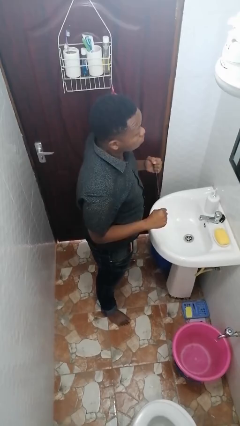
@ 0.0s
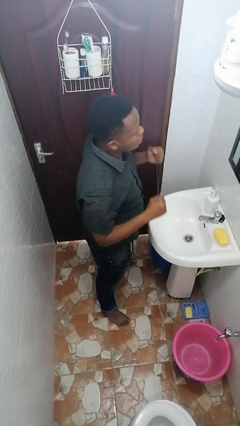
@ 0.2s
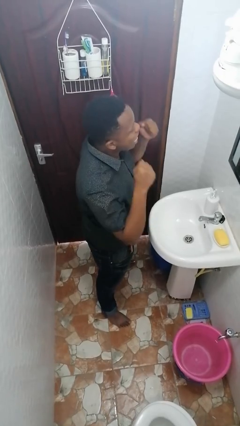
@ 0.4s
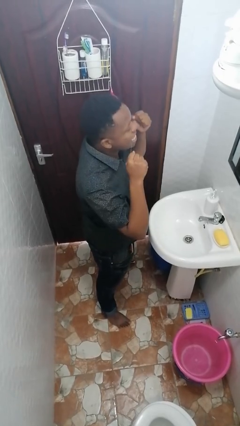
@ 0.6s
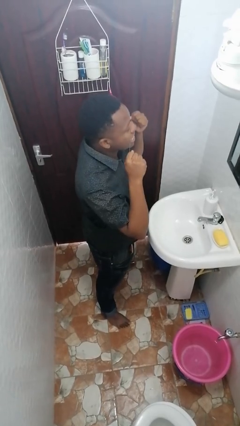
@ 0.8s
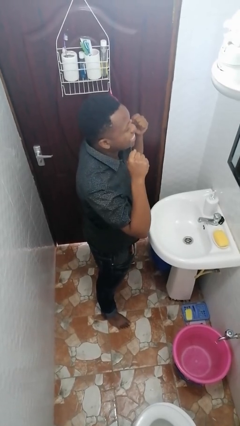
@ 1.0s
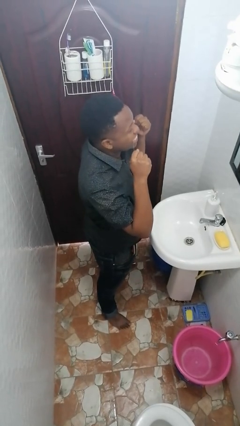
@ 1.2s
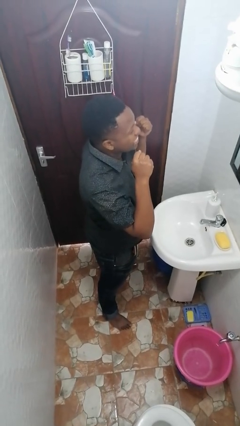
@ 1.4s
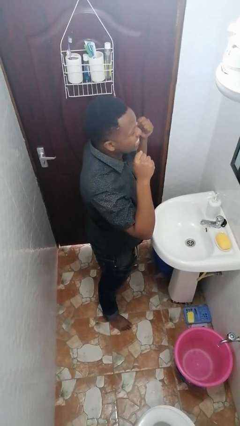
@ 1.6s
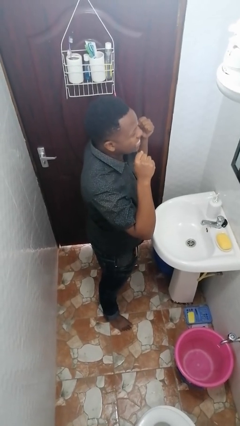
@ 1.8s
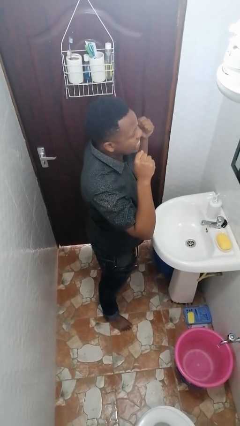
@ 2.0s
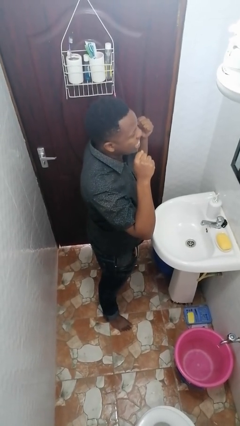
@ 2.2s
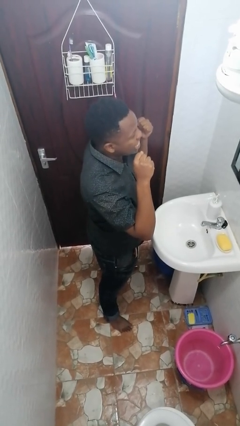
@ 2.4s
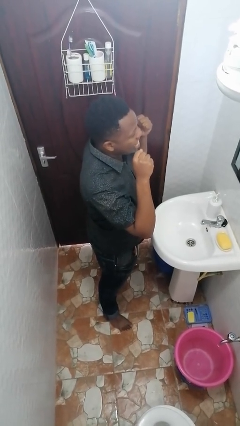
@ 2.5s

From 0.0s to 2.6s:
person flosses

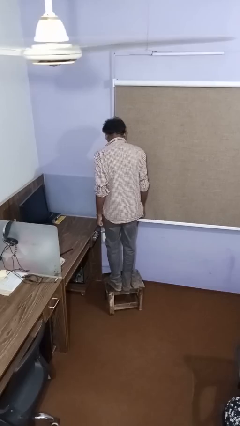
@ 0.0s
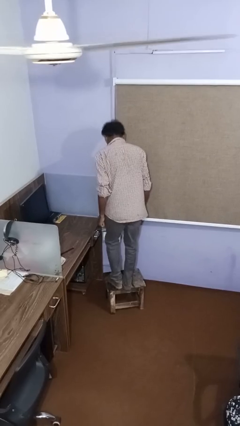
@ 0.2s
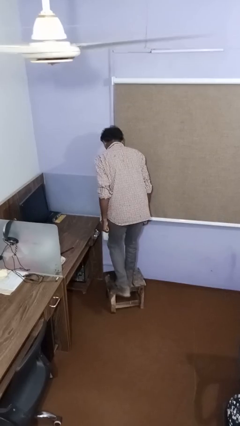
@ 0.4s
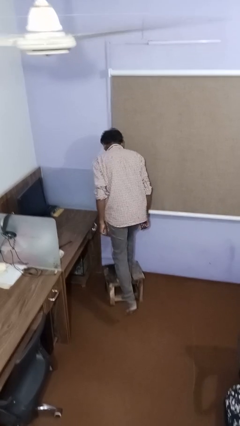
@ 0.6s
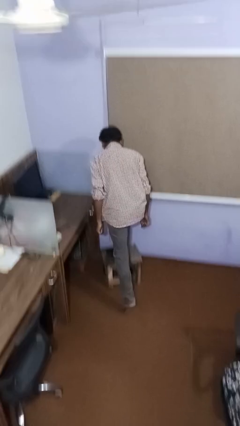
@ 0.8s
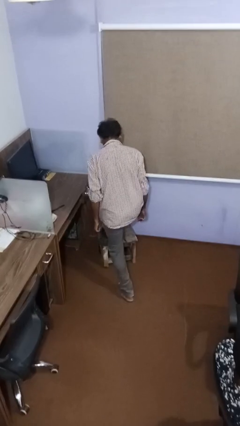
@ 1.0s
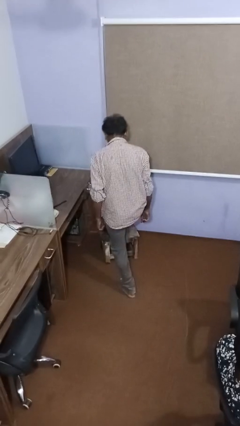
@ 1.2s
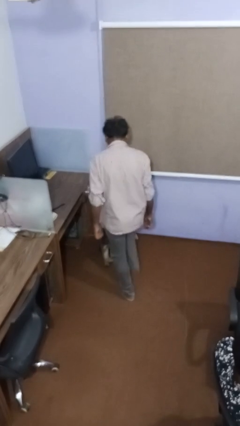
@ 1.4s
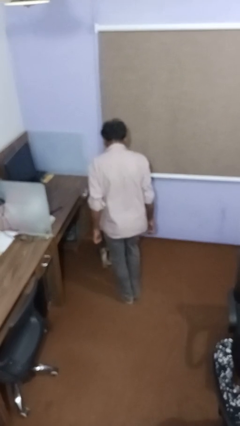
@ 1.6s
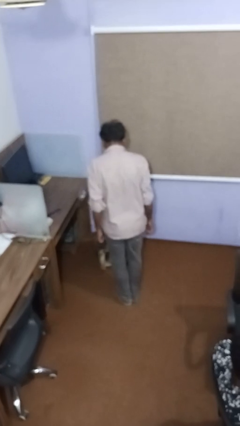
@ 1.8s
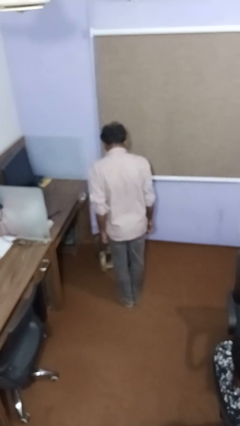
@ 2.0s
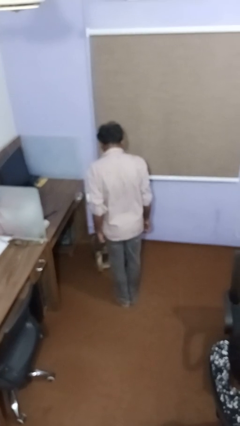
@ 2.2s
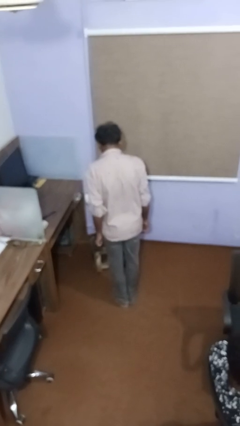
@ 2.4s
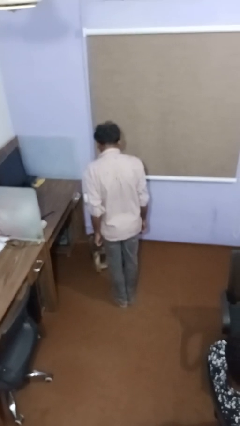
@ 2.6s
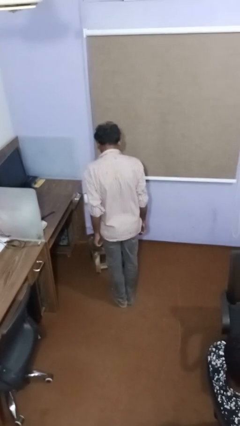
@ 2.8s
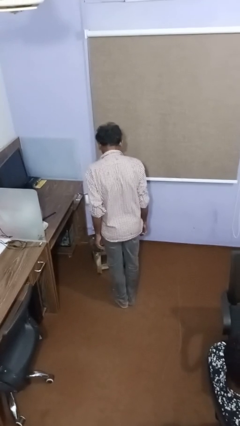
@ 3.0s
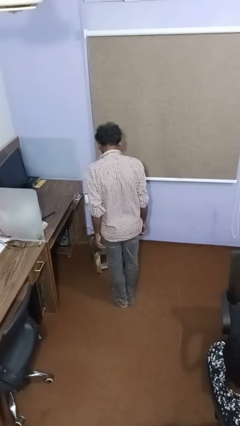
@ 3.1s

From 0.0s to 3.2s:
person climbs off table

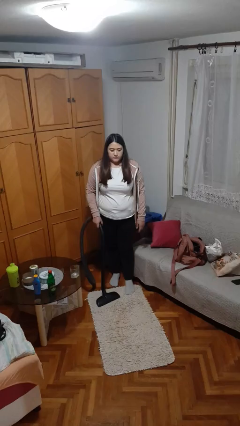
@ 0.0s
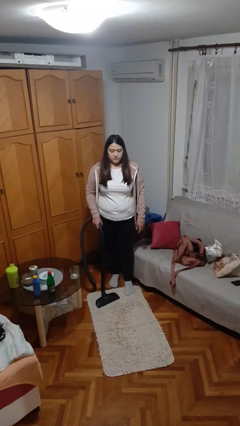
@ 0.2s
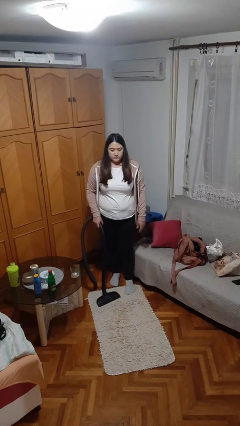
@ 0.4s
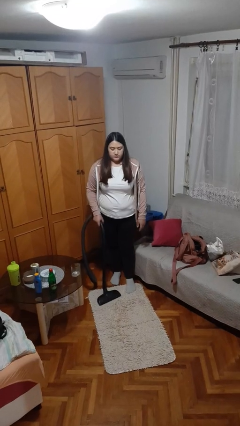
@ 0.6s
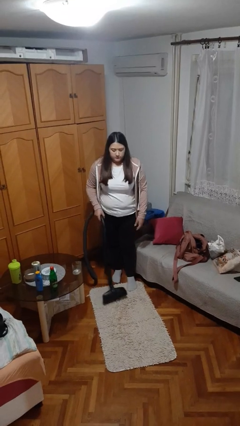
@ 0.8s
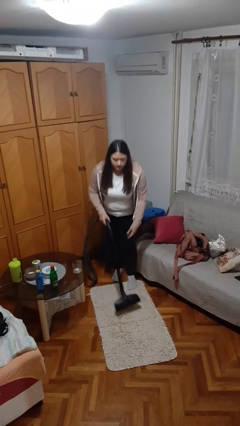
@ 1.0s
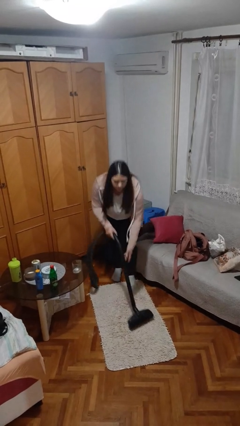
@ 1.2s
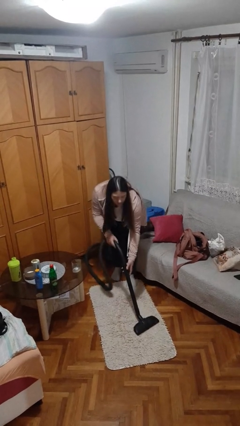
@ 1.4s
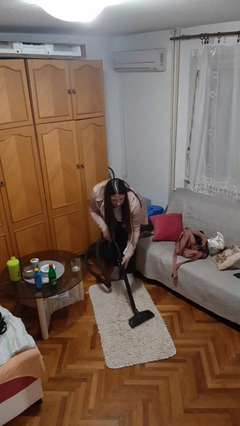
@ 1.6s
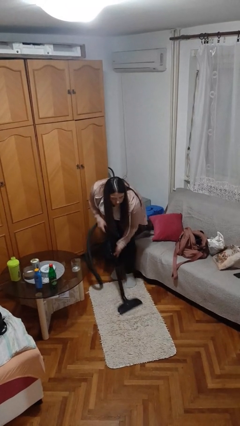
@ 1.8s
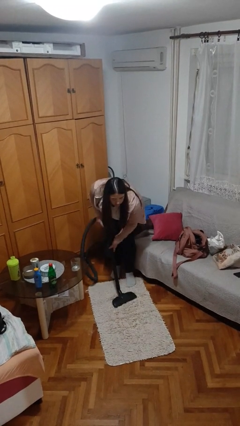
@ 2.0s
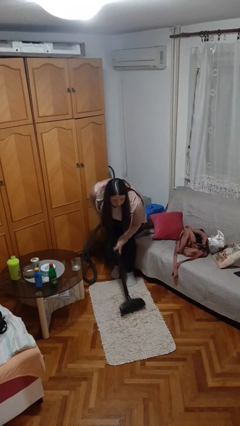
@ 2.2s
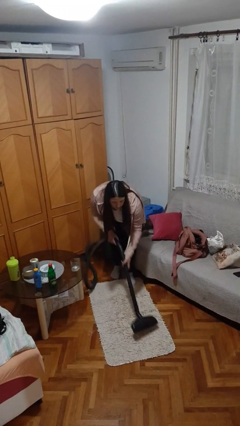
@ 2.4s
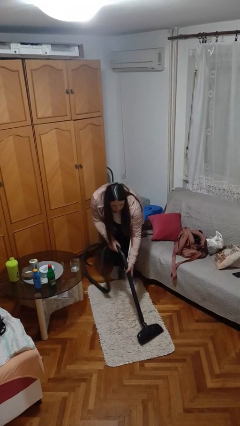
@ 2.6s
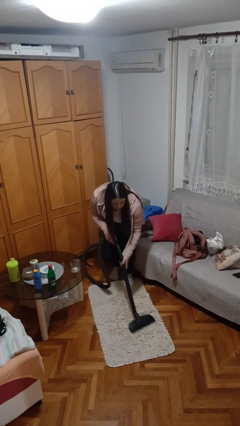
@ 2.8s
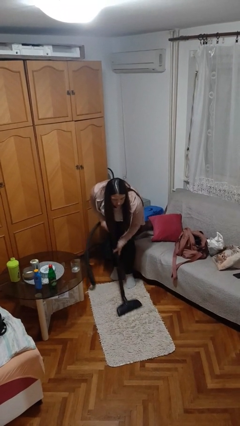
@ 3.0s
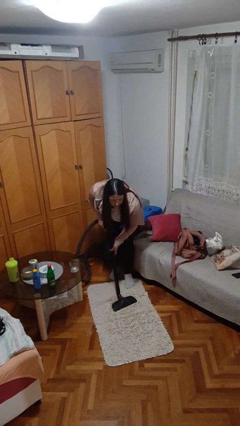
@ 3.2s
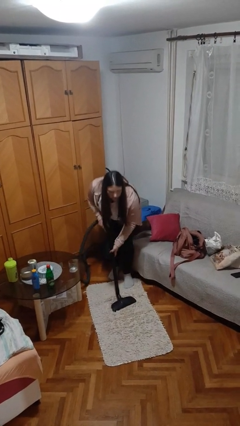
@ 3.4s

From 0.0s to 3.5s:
person vacuums carpet

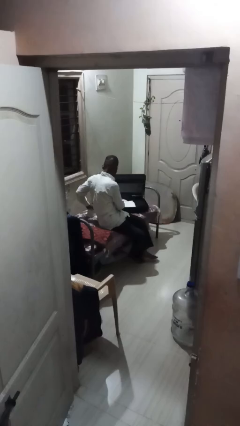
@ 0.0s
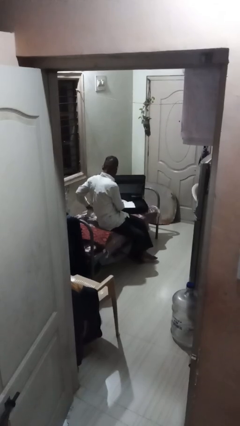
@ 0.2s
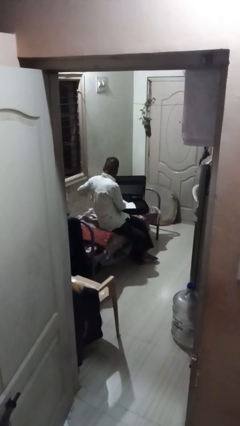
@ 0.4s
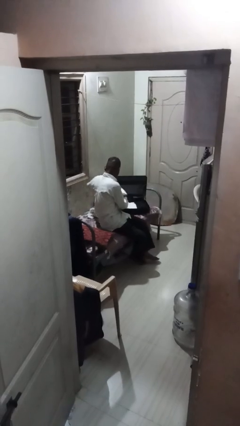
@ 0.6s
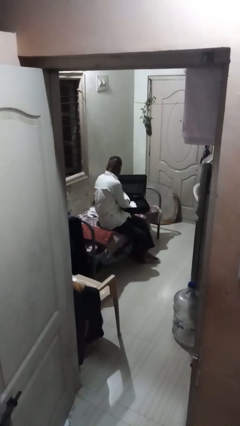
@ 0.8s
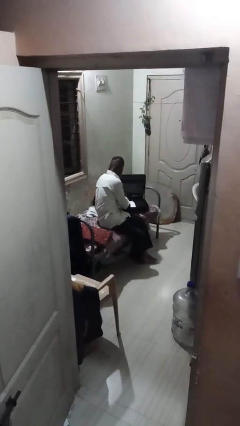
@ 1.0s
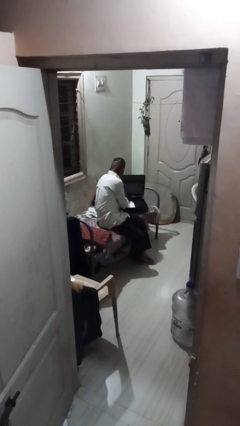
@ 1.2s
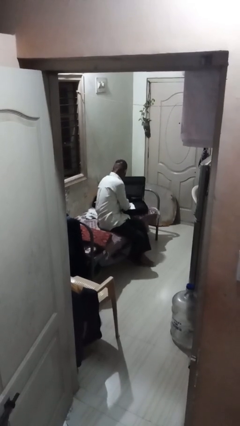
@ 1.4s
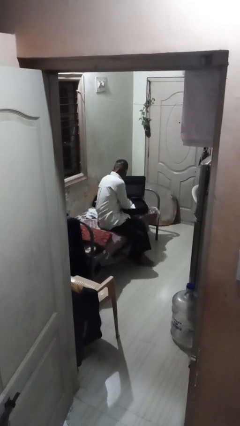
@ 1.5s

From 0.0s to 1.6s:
person loads clothes into suitcase

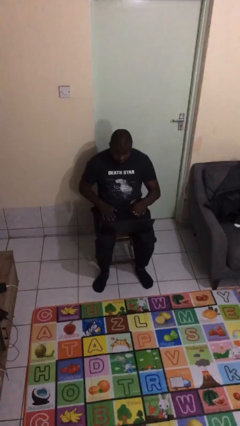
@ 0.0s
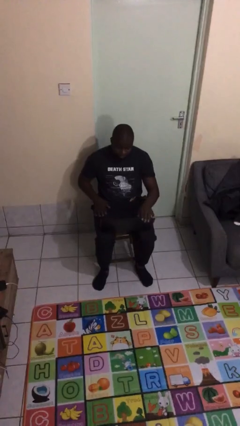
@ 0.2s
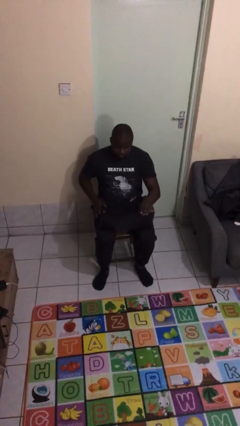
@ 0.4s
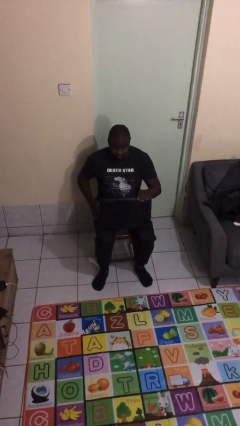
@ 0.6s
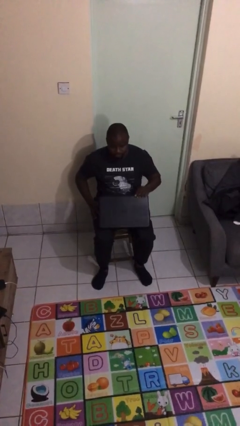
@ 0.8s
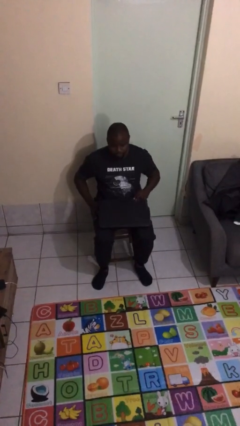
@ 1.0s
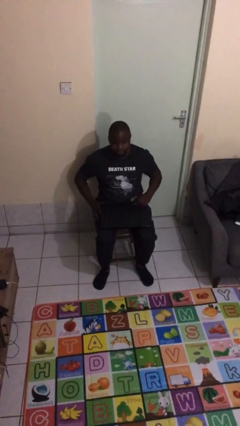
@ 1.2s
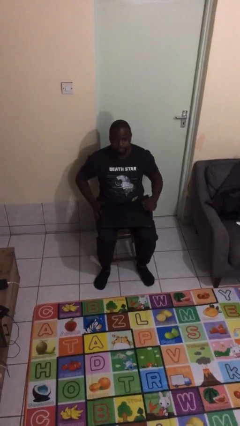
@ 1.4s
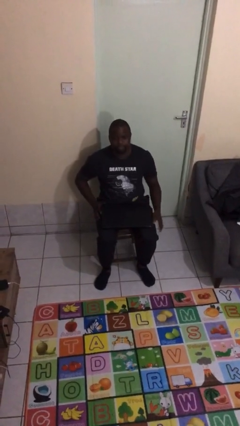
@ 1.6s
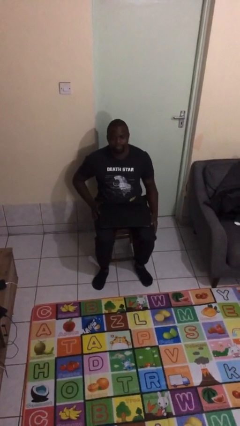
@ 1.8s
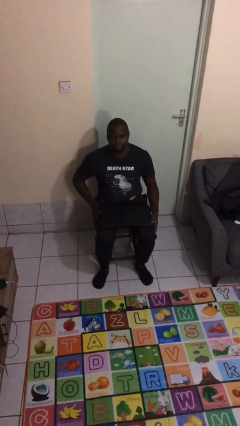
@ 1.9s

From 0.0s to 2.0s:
person closes laptop

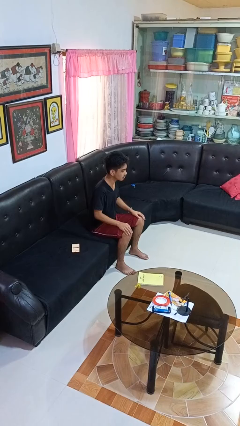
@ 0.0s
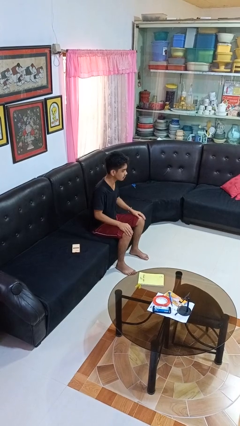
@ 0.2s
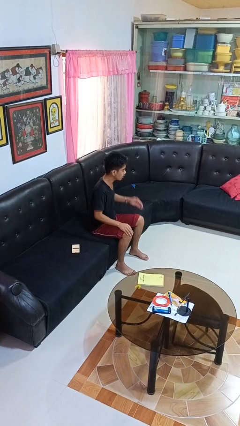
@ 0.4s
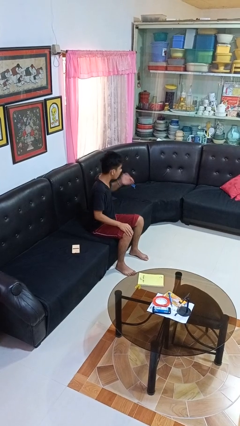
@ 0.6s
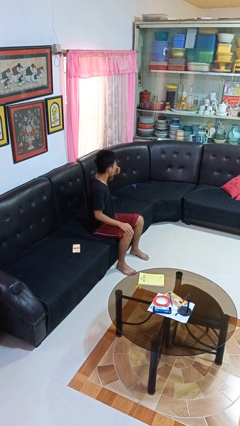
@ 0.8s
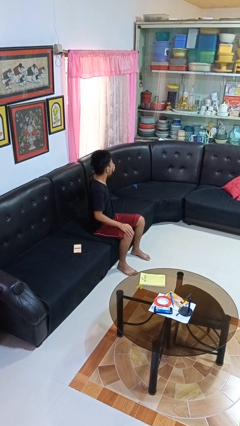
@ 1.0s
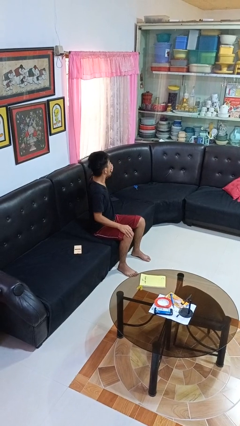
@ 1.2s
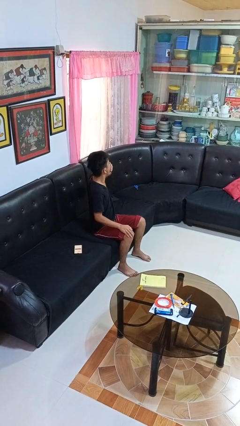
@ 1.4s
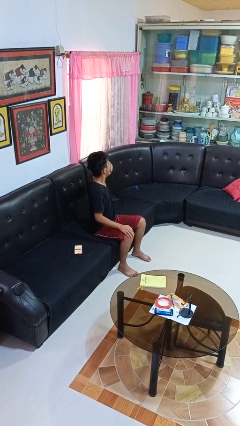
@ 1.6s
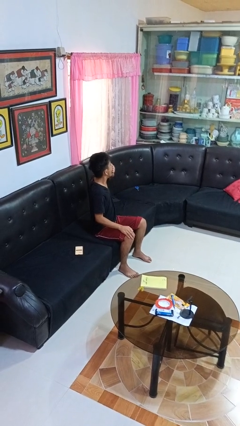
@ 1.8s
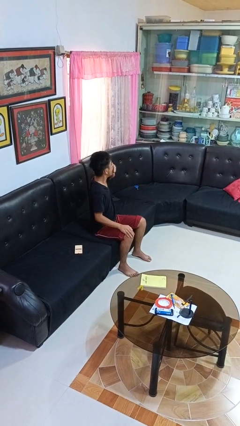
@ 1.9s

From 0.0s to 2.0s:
person yawns

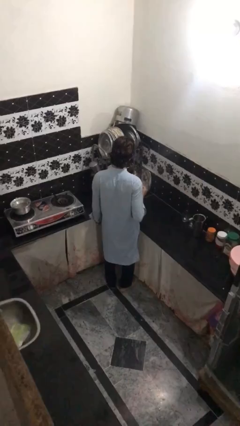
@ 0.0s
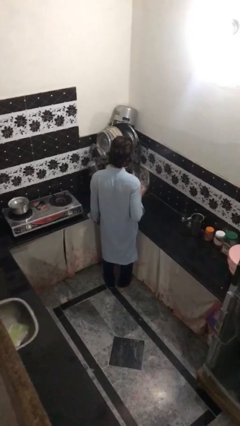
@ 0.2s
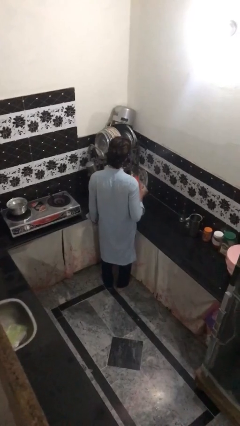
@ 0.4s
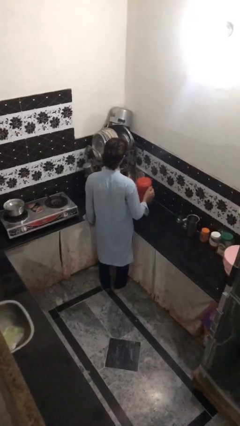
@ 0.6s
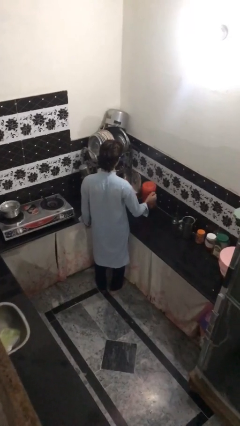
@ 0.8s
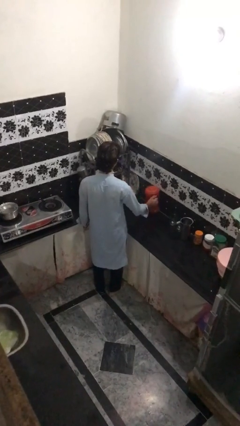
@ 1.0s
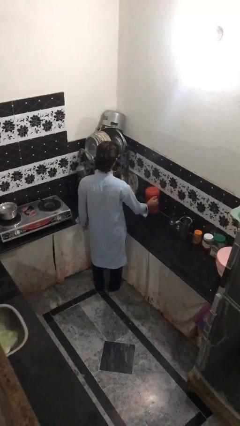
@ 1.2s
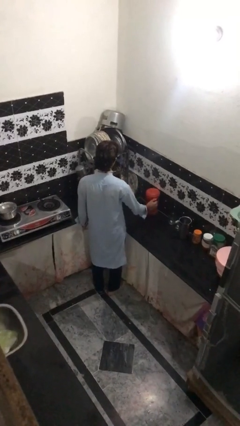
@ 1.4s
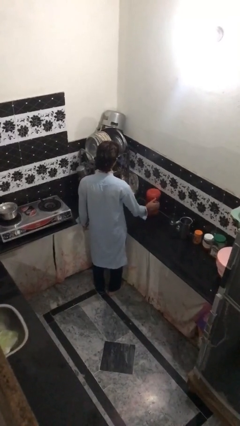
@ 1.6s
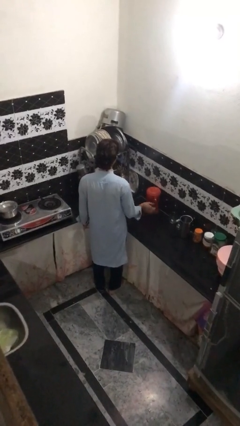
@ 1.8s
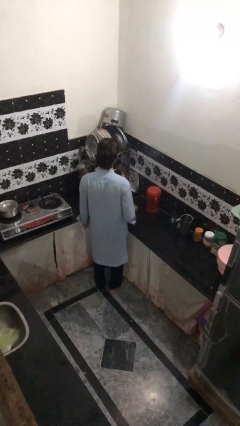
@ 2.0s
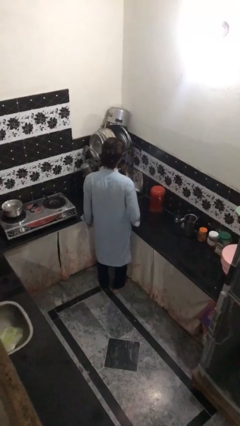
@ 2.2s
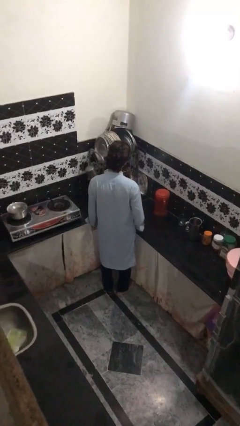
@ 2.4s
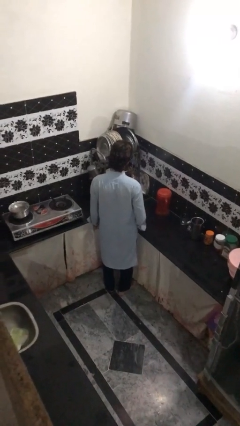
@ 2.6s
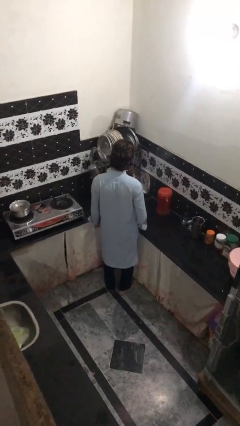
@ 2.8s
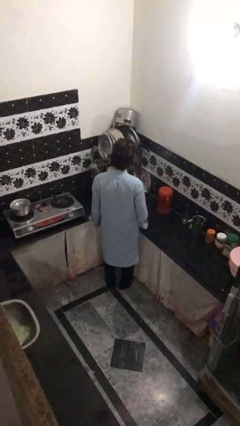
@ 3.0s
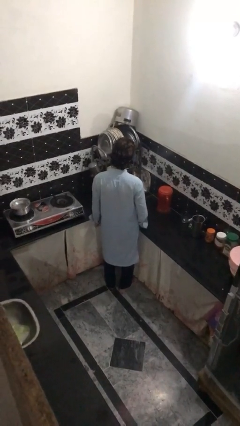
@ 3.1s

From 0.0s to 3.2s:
person puts down object on countertop
